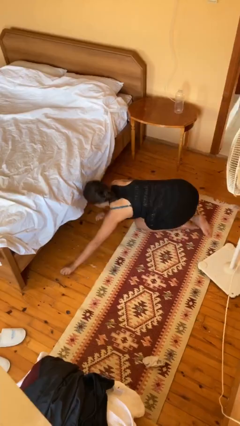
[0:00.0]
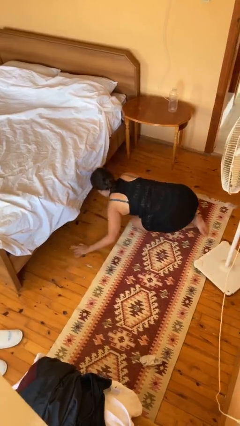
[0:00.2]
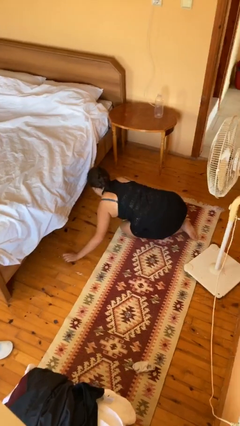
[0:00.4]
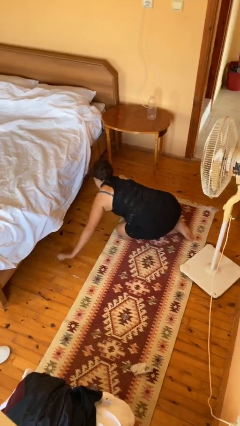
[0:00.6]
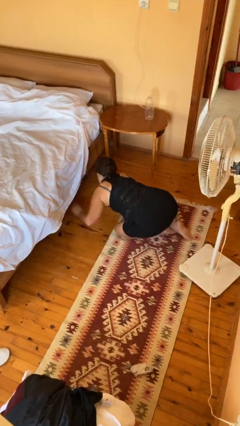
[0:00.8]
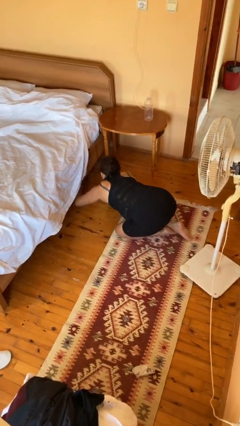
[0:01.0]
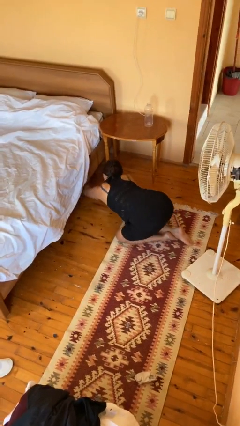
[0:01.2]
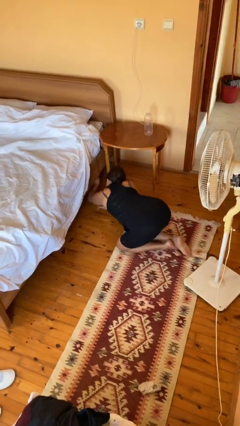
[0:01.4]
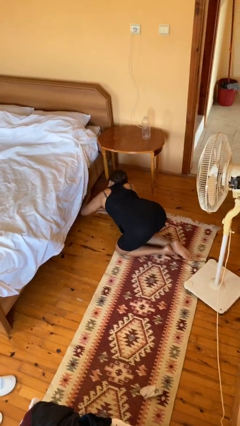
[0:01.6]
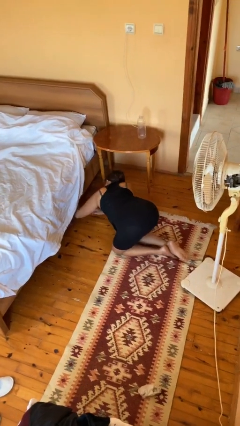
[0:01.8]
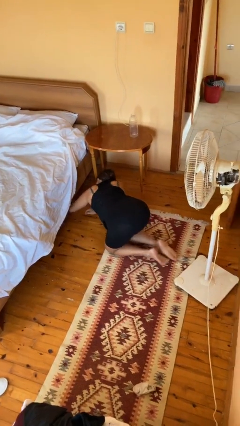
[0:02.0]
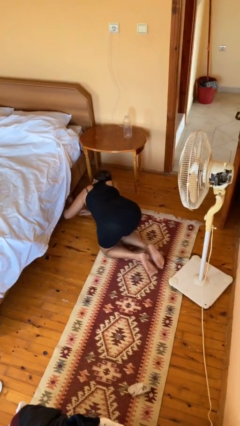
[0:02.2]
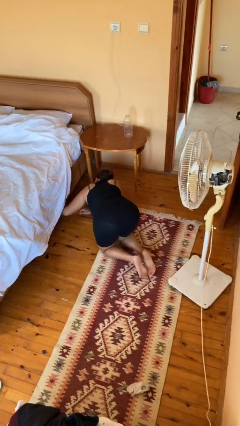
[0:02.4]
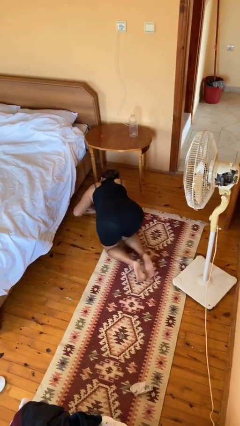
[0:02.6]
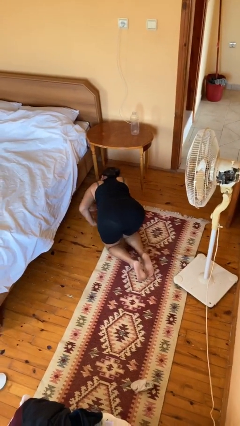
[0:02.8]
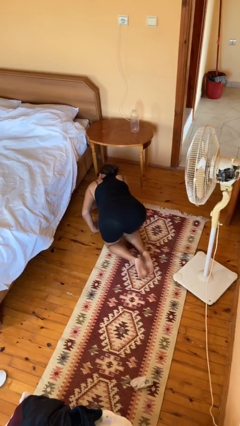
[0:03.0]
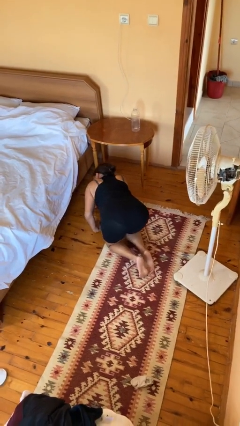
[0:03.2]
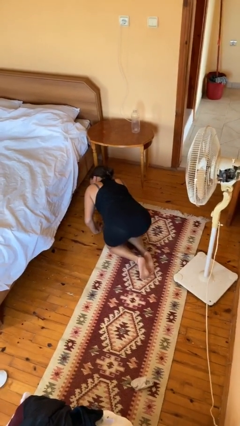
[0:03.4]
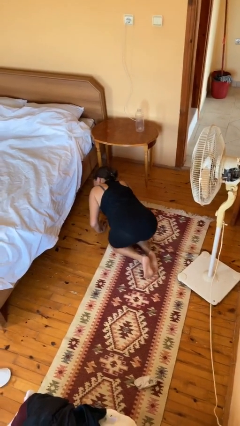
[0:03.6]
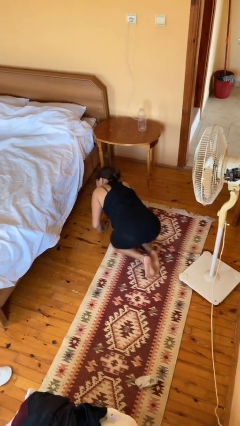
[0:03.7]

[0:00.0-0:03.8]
person searches under bed

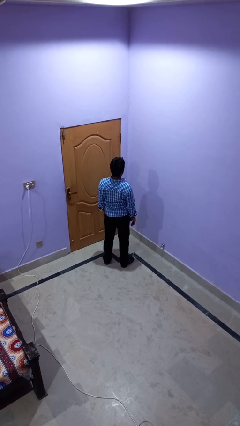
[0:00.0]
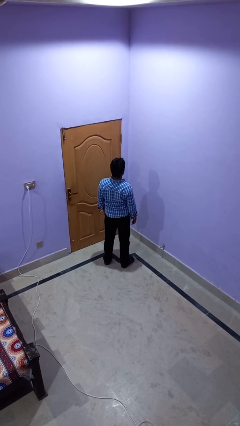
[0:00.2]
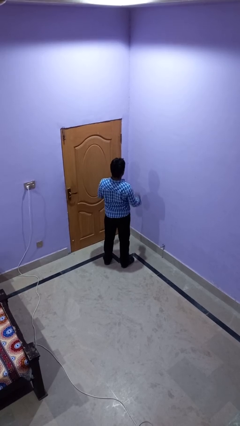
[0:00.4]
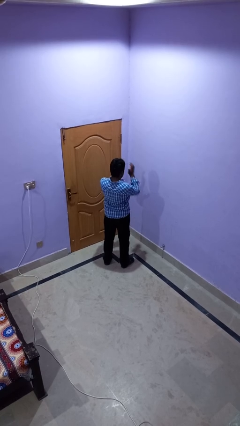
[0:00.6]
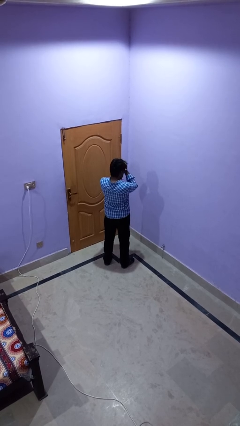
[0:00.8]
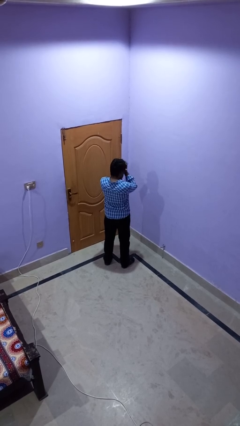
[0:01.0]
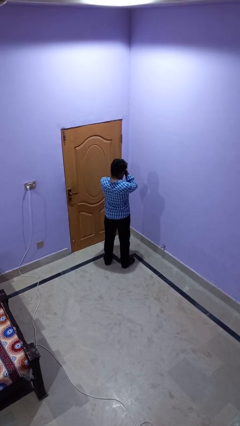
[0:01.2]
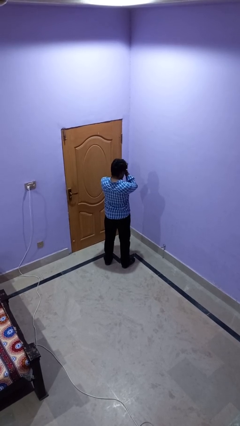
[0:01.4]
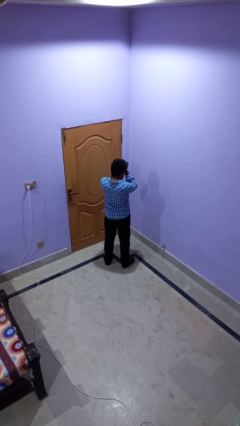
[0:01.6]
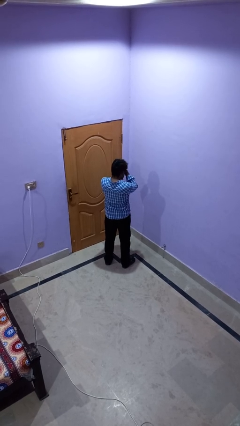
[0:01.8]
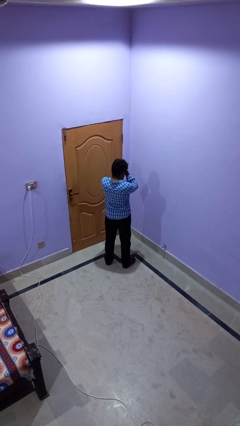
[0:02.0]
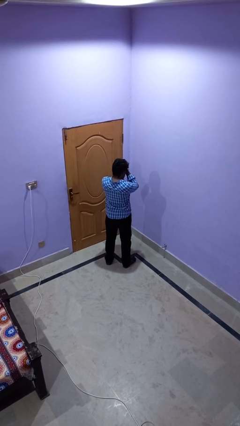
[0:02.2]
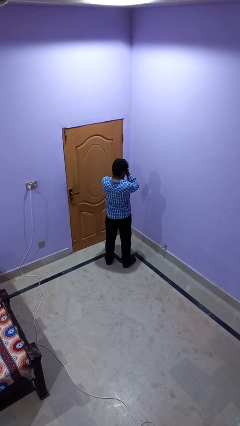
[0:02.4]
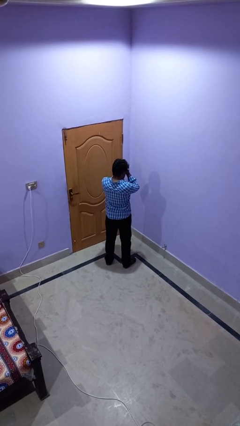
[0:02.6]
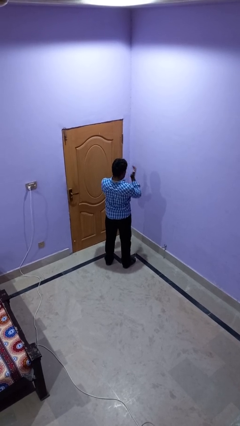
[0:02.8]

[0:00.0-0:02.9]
person rubs eyes

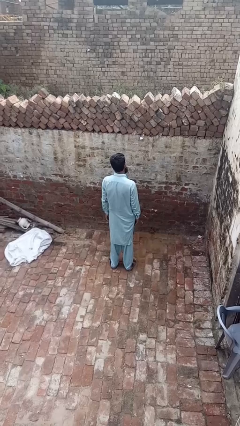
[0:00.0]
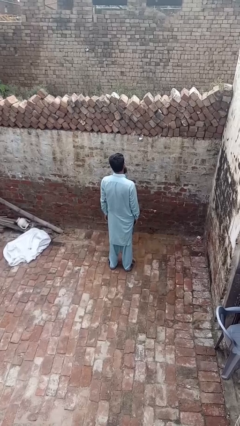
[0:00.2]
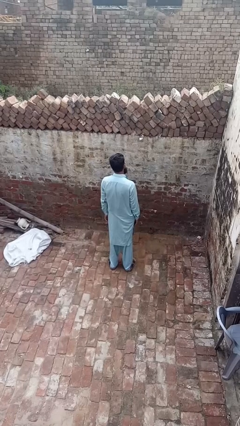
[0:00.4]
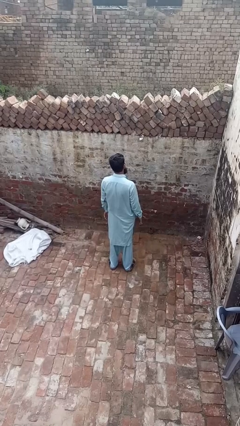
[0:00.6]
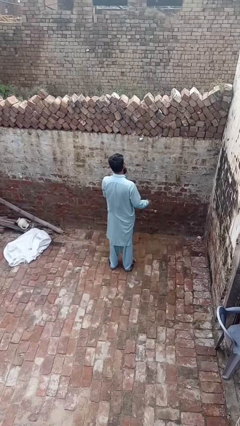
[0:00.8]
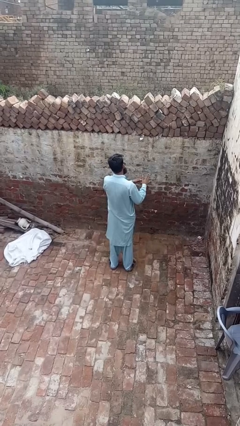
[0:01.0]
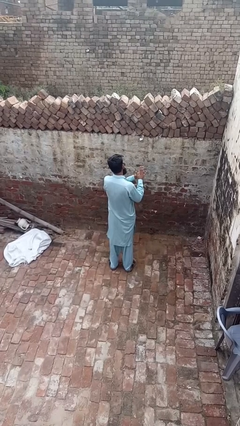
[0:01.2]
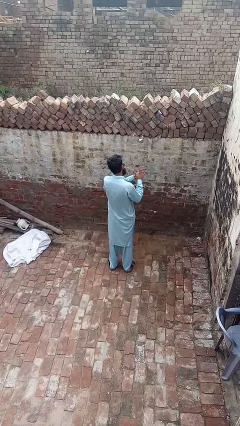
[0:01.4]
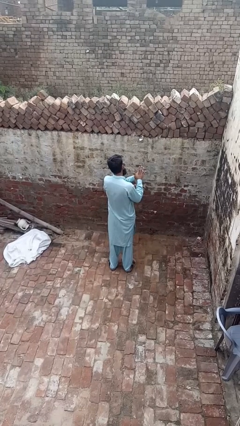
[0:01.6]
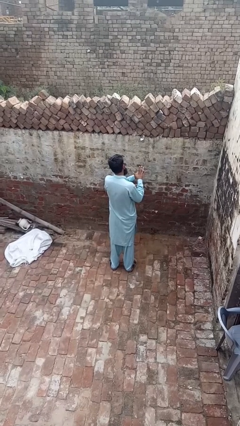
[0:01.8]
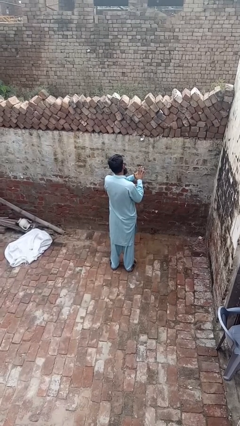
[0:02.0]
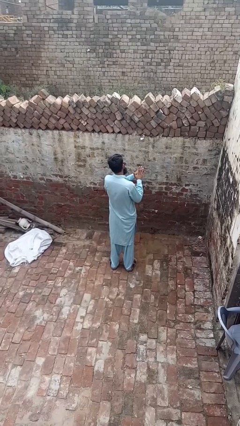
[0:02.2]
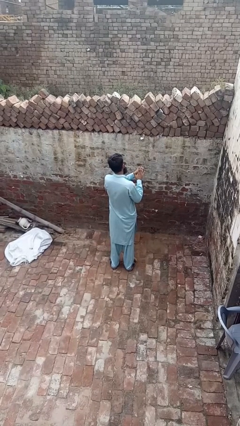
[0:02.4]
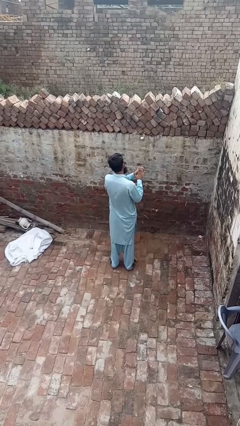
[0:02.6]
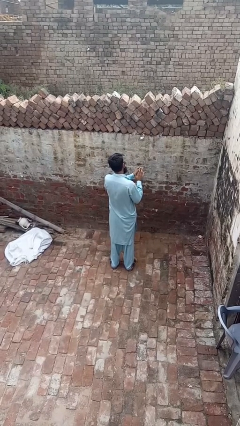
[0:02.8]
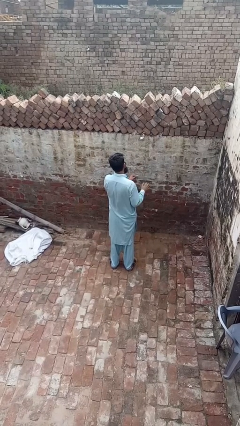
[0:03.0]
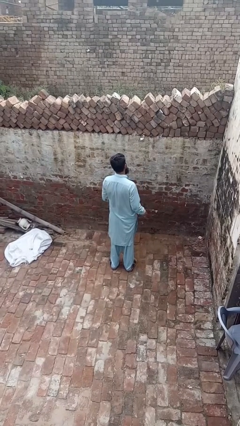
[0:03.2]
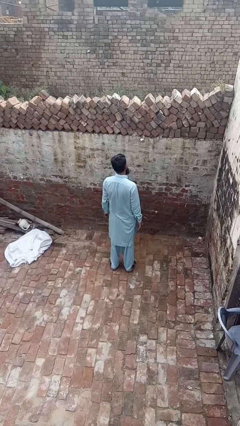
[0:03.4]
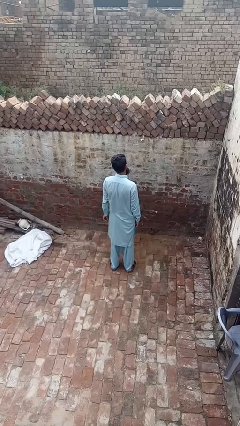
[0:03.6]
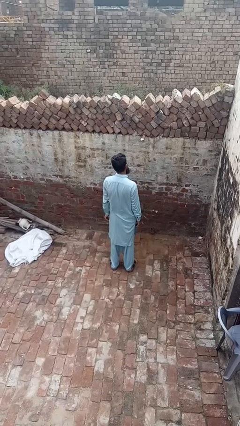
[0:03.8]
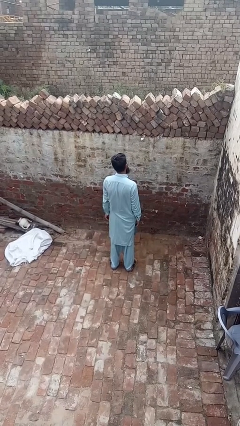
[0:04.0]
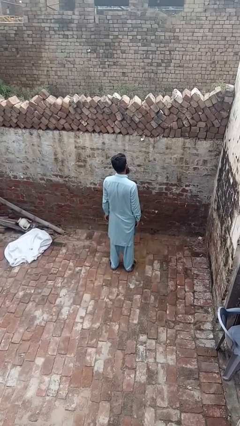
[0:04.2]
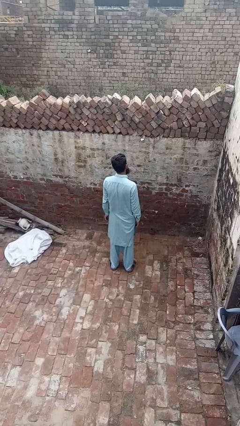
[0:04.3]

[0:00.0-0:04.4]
person takes off ring

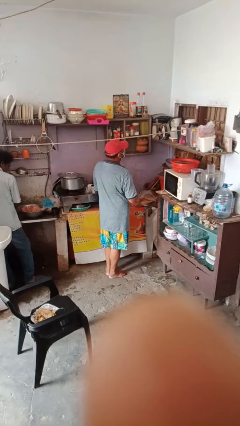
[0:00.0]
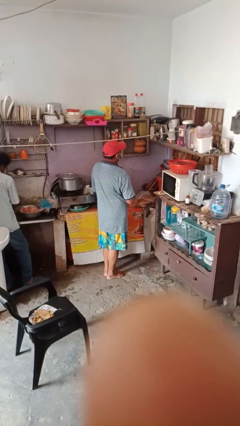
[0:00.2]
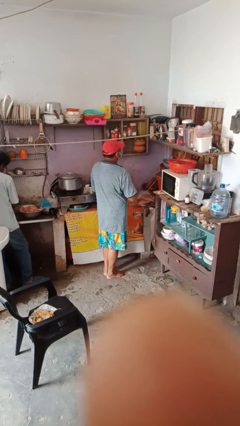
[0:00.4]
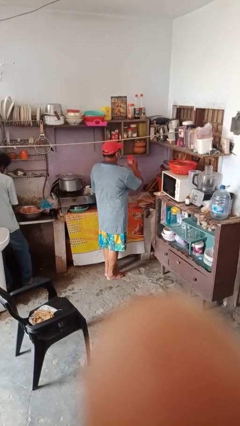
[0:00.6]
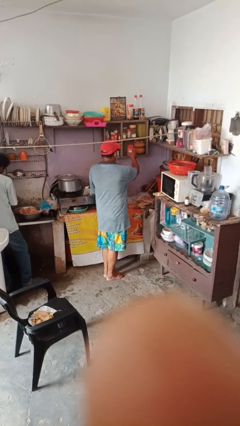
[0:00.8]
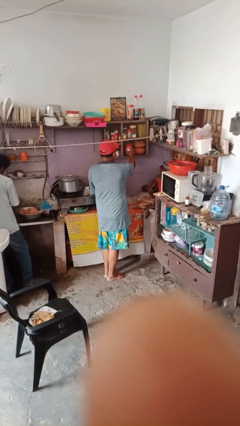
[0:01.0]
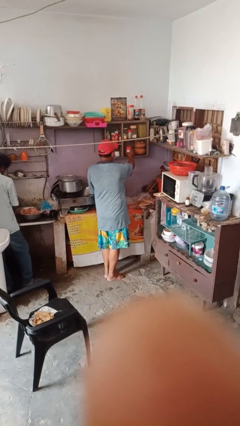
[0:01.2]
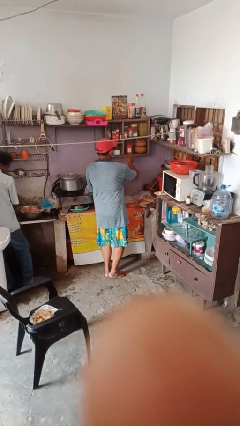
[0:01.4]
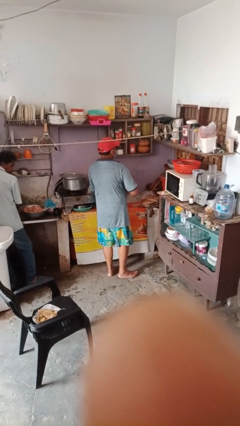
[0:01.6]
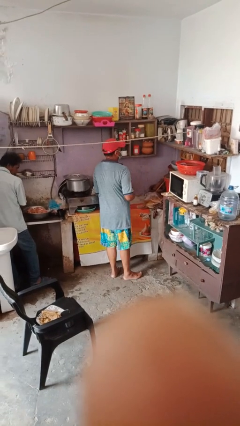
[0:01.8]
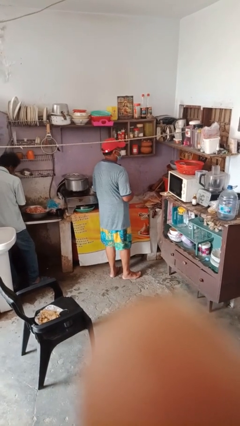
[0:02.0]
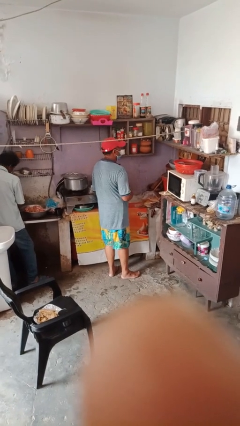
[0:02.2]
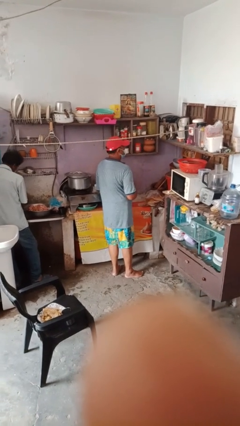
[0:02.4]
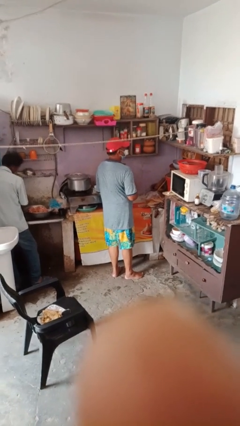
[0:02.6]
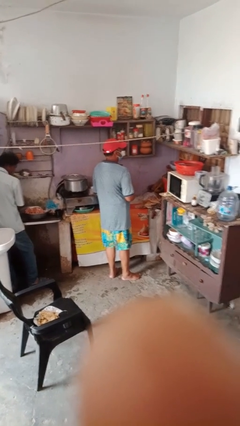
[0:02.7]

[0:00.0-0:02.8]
person puts down object on shelf

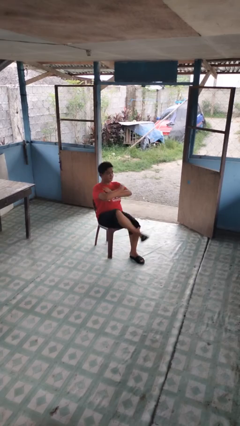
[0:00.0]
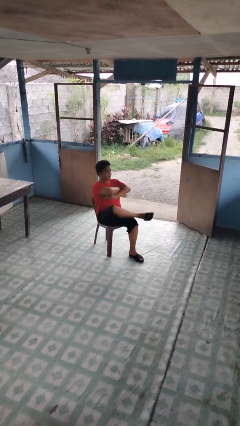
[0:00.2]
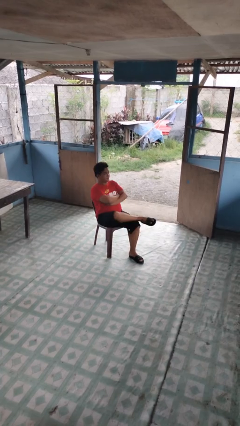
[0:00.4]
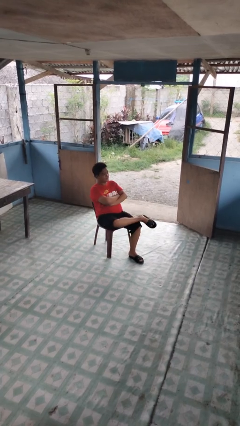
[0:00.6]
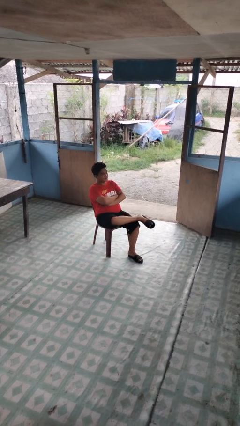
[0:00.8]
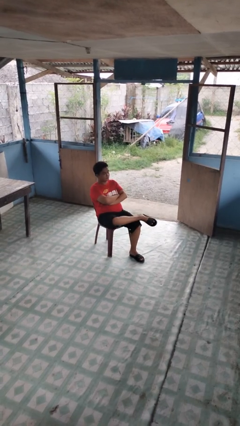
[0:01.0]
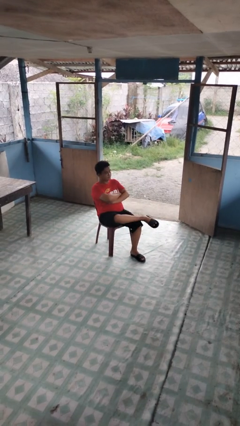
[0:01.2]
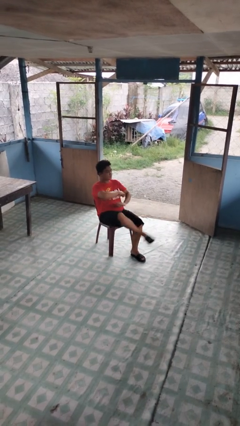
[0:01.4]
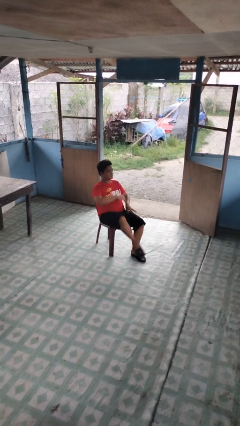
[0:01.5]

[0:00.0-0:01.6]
person crosses arms

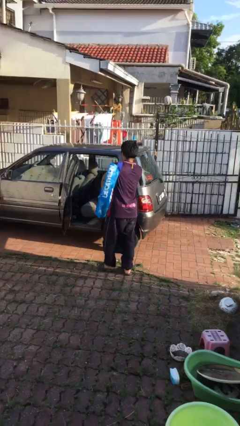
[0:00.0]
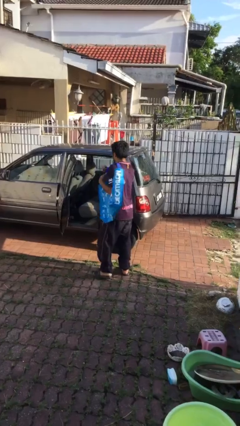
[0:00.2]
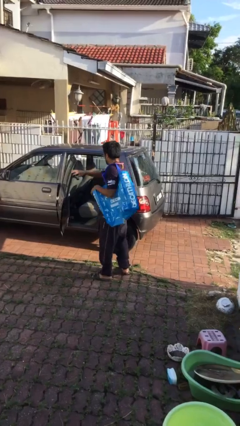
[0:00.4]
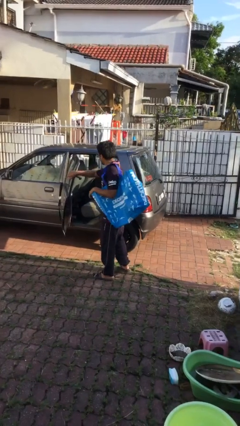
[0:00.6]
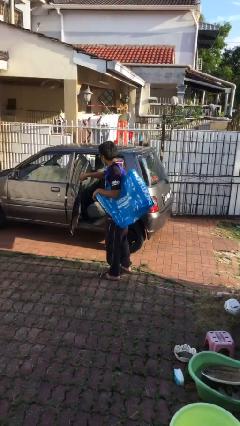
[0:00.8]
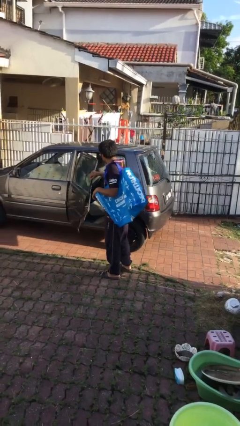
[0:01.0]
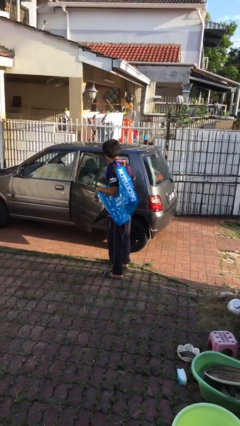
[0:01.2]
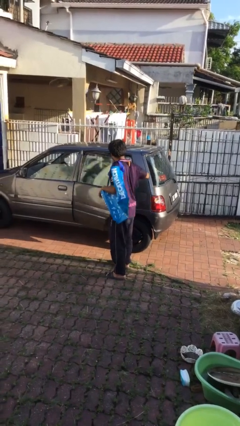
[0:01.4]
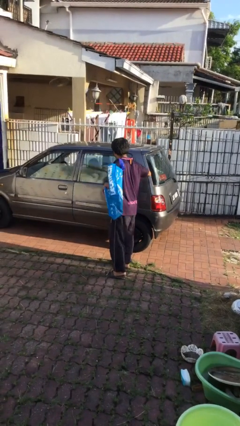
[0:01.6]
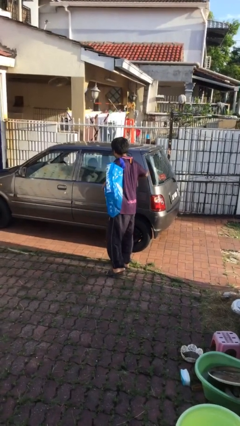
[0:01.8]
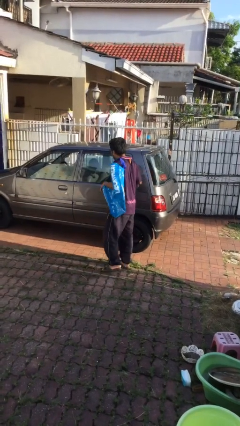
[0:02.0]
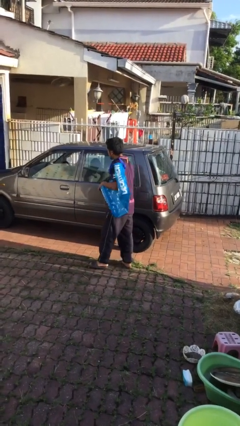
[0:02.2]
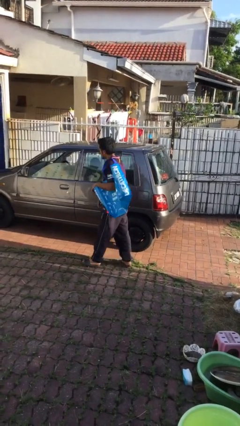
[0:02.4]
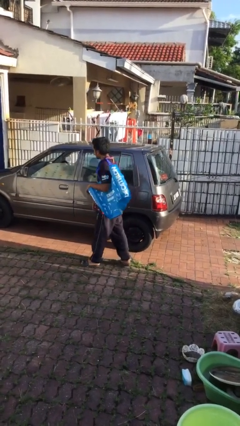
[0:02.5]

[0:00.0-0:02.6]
person closes car door
